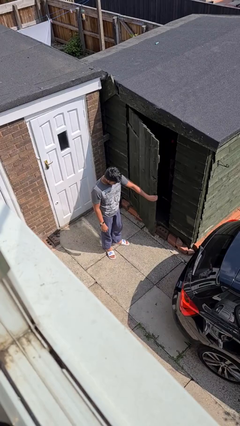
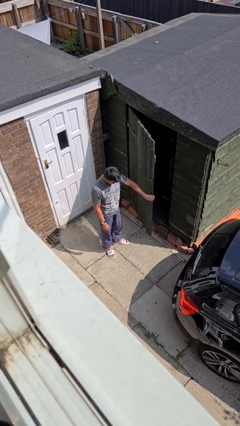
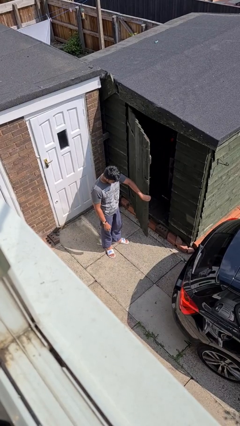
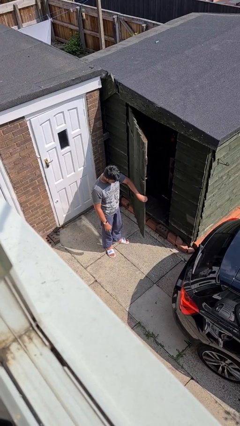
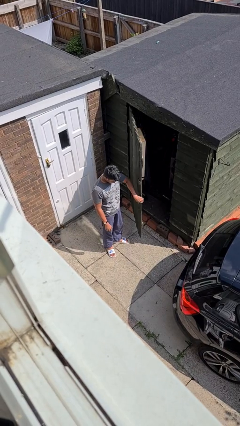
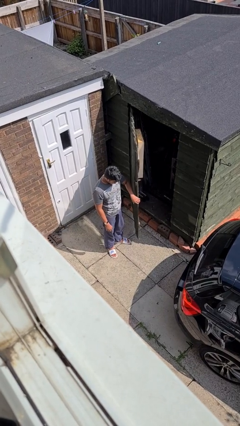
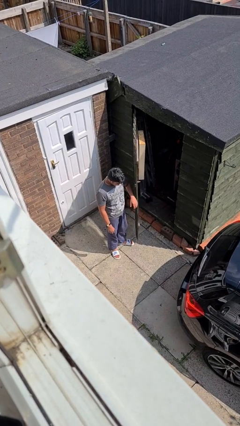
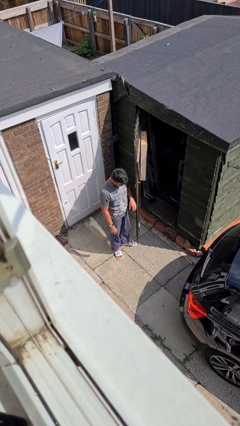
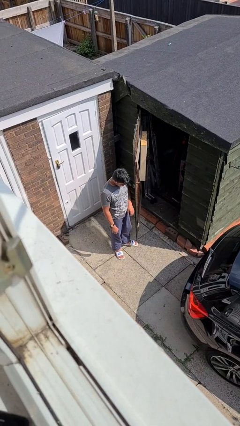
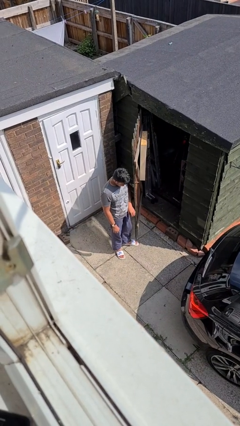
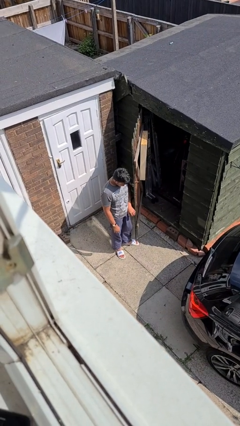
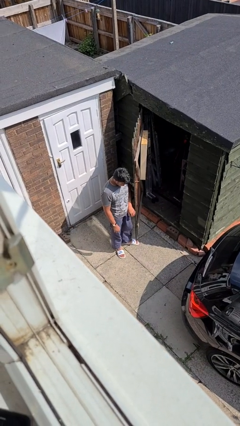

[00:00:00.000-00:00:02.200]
person opens facility door

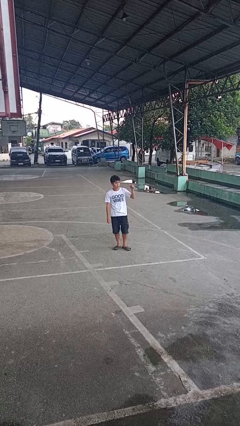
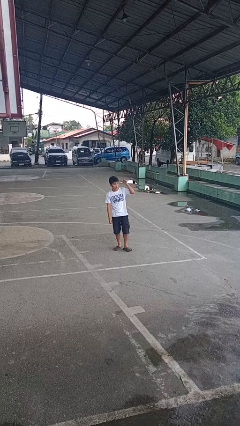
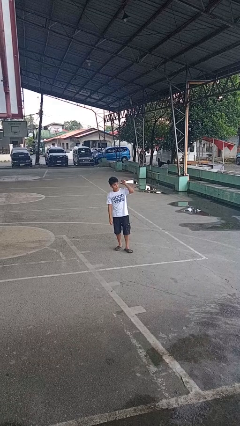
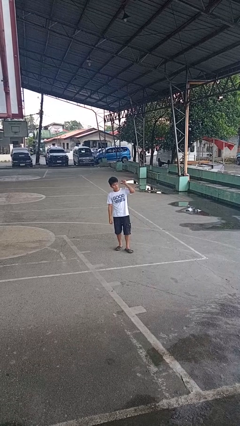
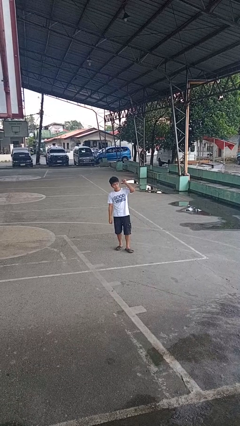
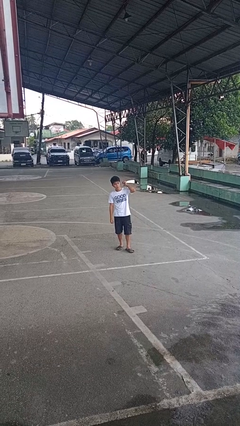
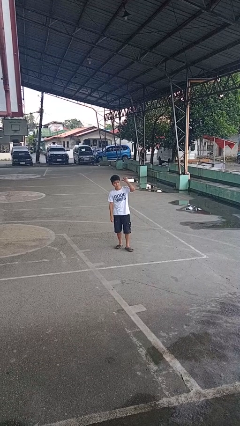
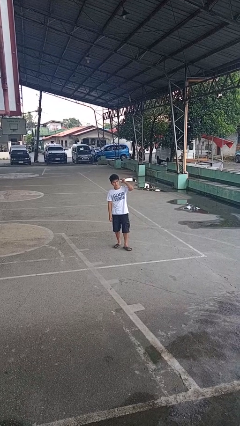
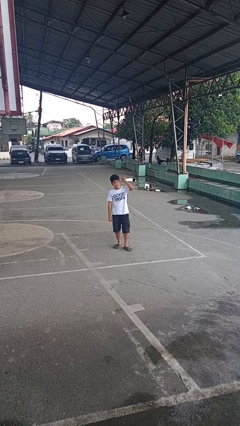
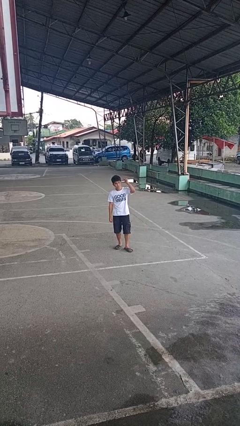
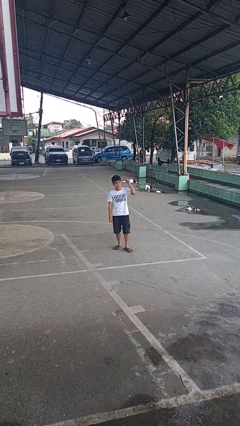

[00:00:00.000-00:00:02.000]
person gestures behind me

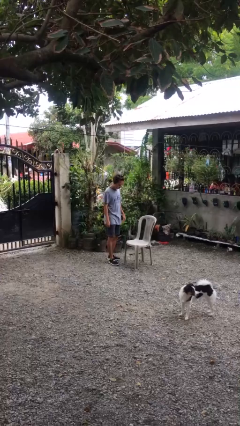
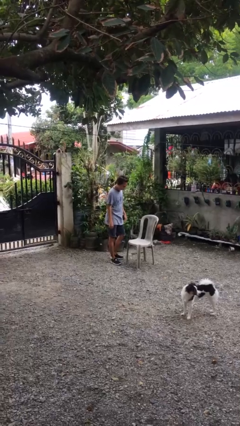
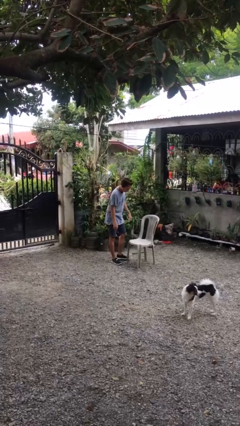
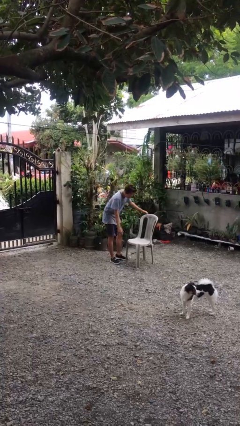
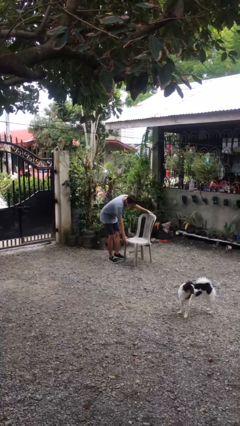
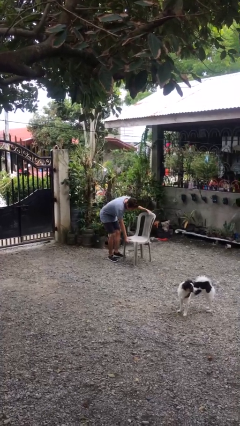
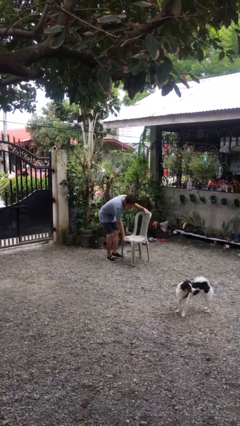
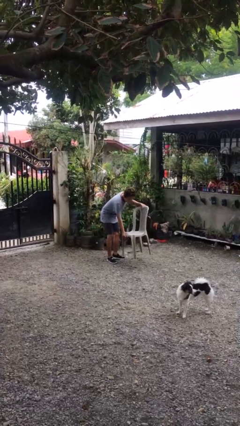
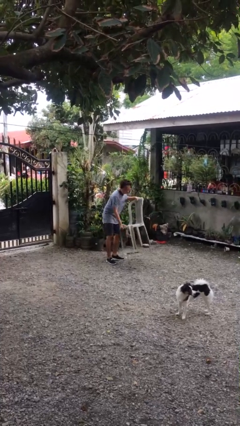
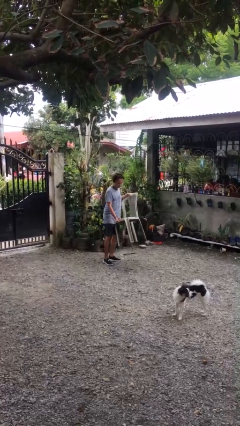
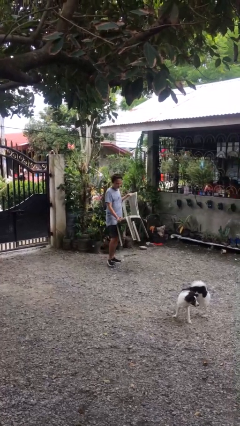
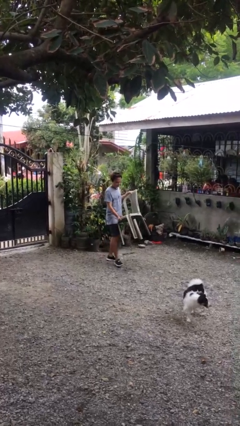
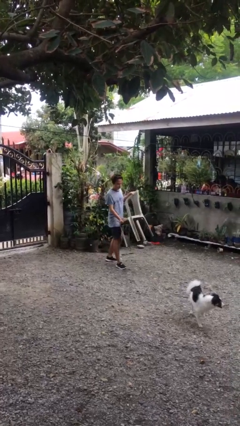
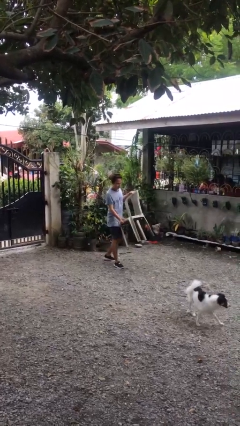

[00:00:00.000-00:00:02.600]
person picks up object from floor

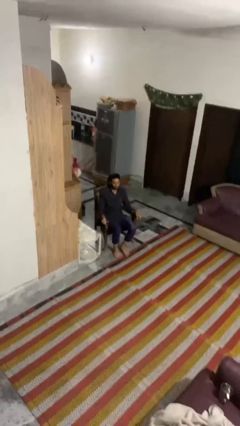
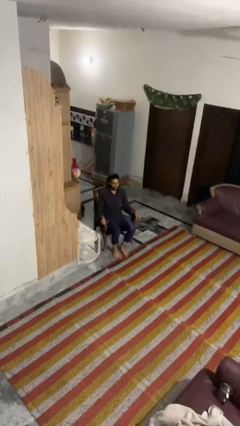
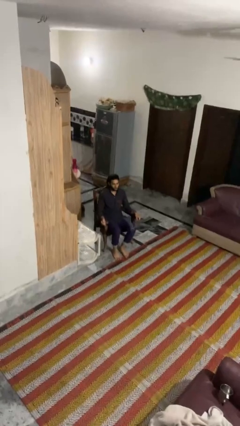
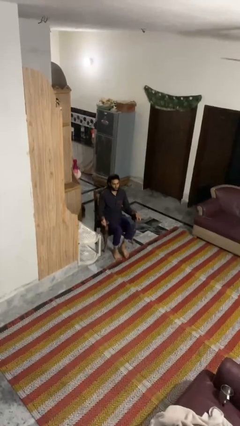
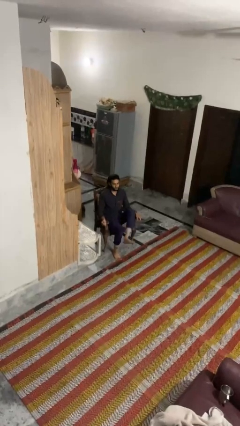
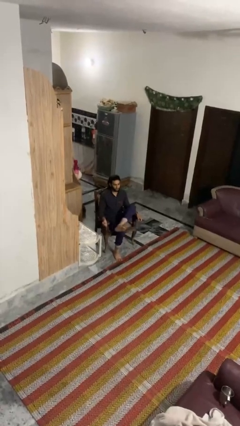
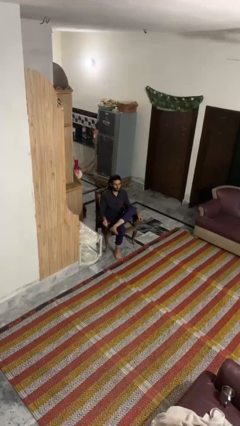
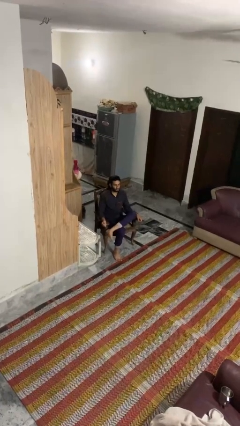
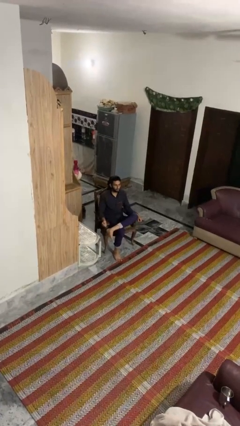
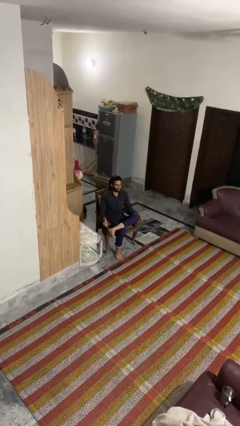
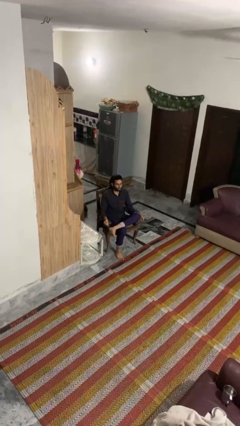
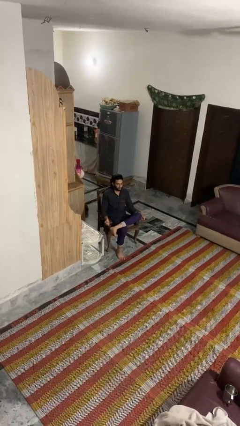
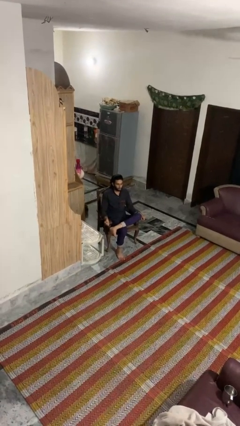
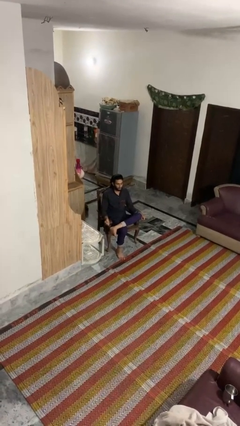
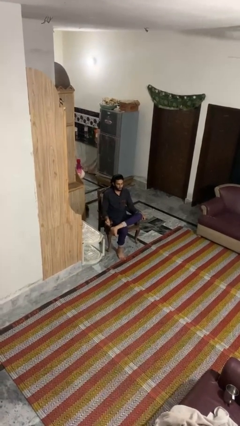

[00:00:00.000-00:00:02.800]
person crosses legs

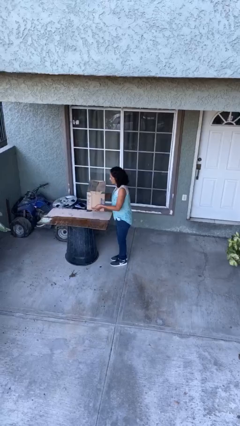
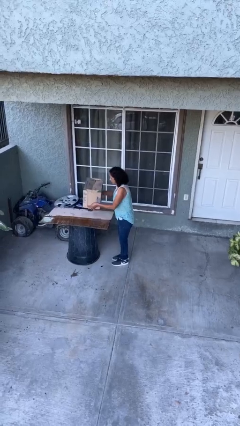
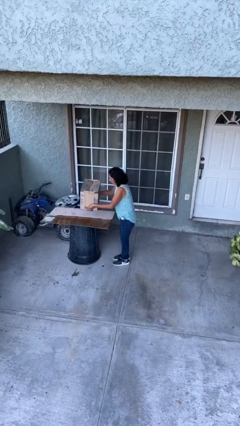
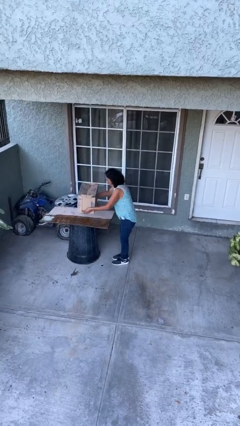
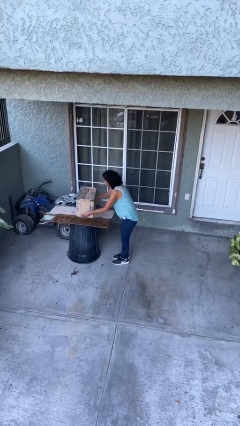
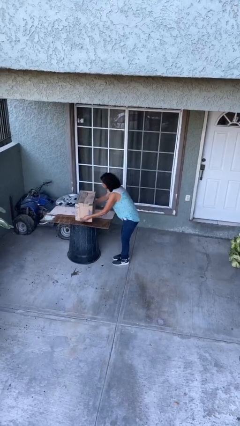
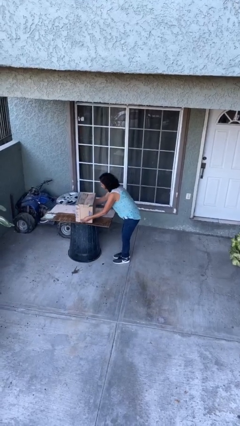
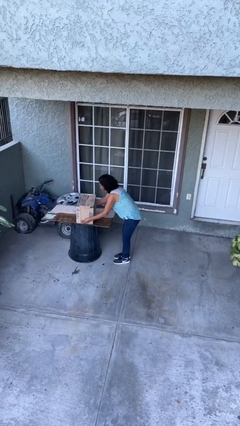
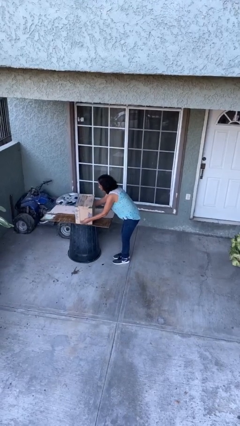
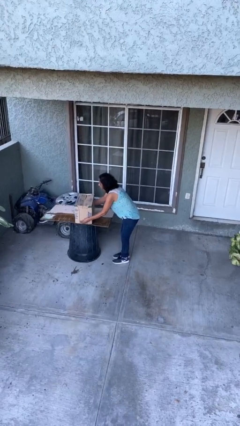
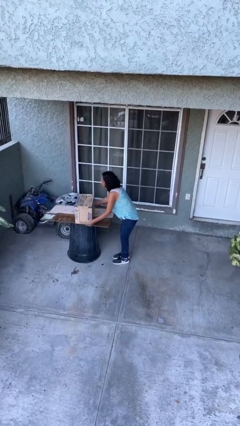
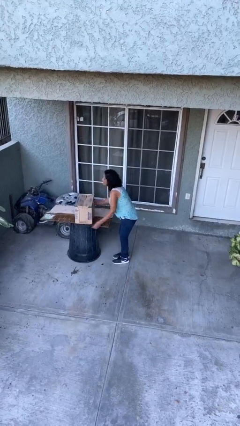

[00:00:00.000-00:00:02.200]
person puts down object on table

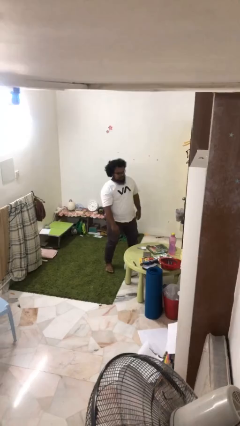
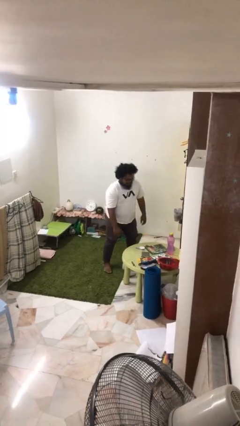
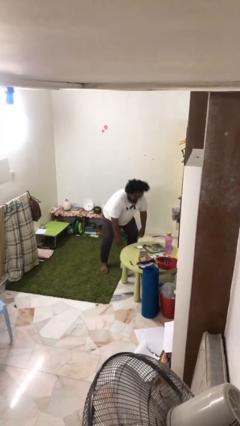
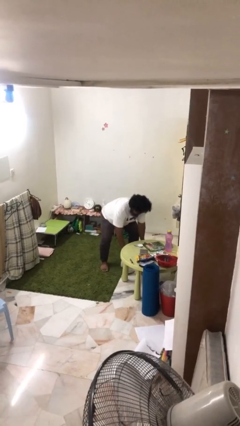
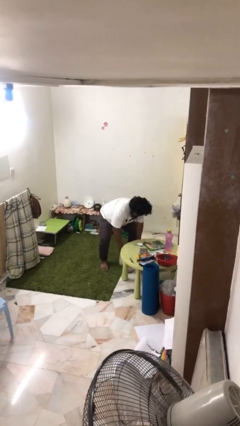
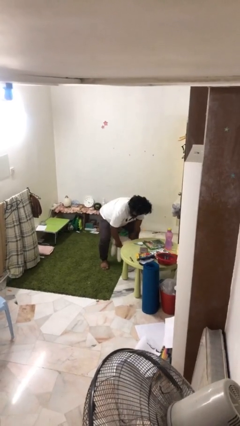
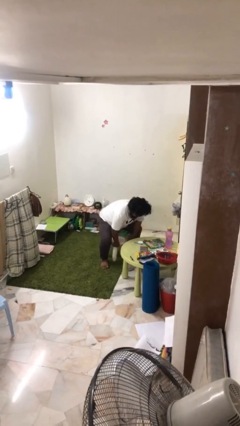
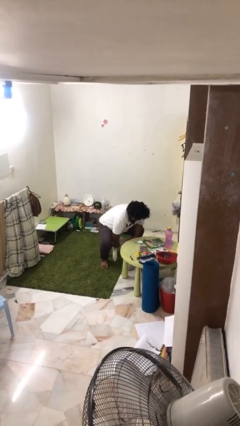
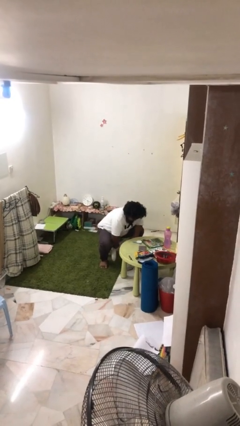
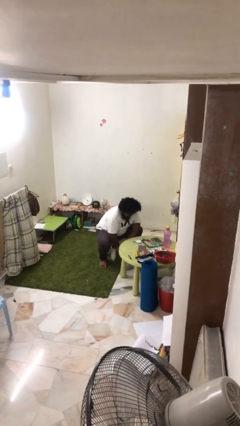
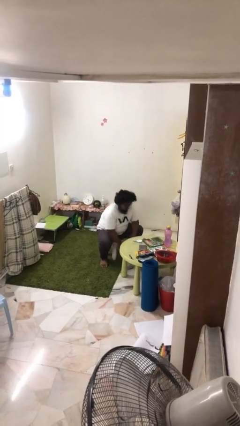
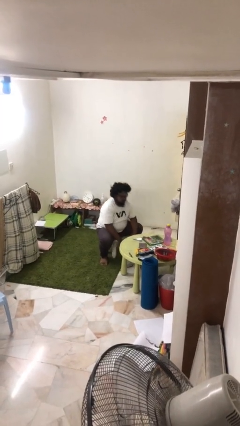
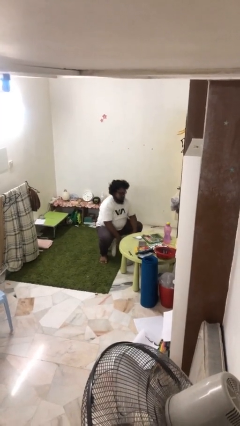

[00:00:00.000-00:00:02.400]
person sits down

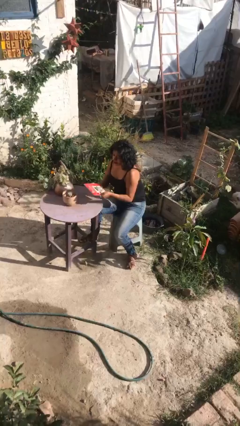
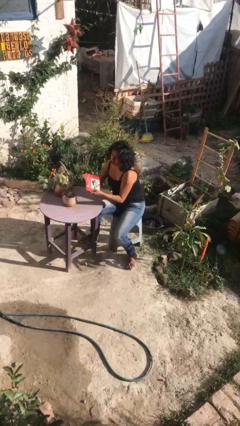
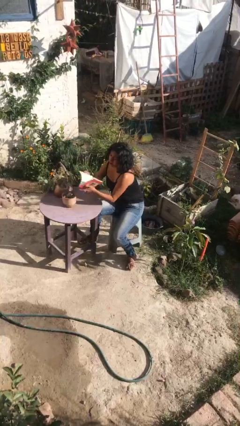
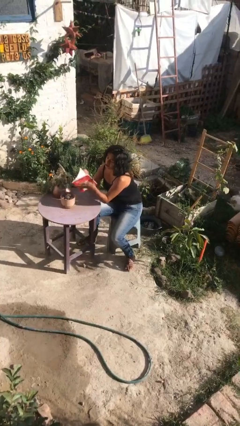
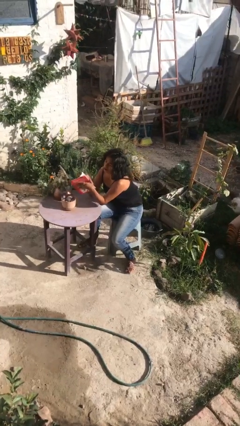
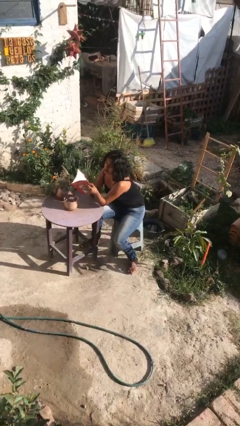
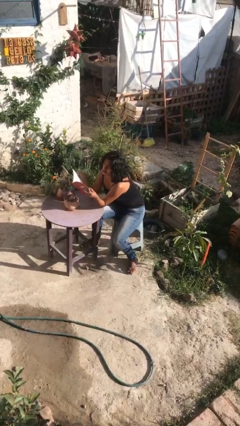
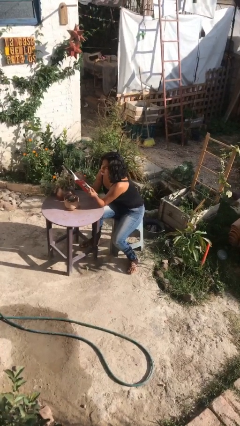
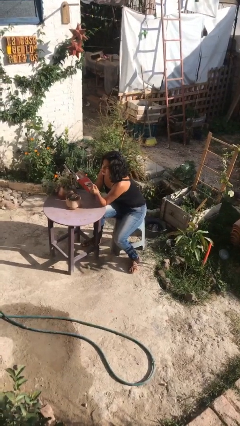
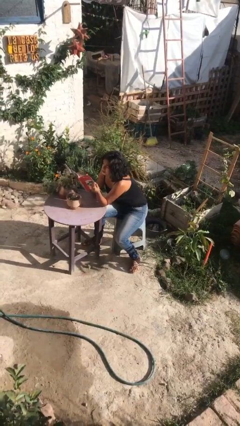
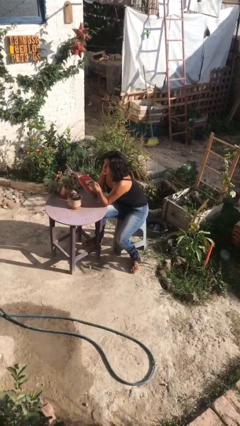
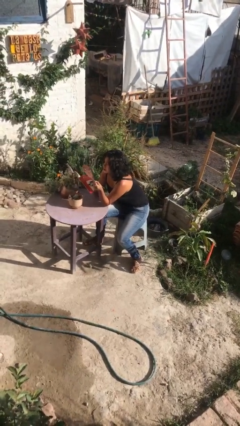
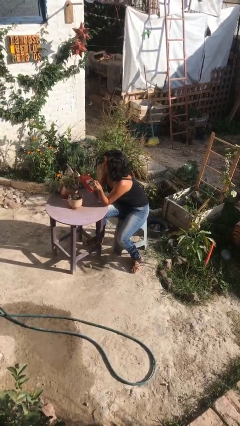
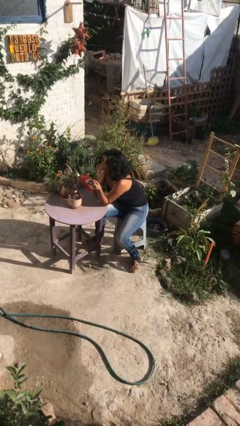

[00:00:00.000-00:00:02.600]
person reads document
